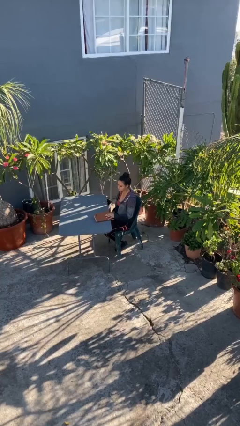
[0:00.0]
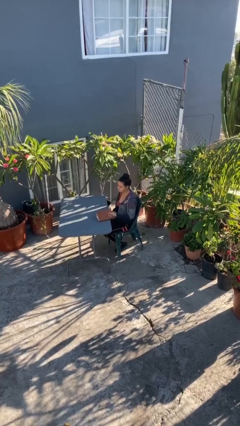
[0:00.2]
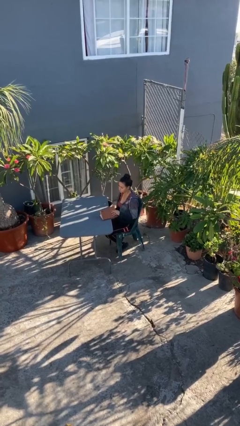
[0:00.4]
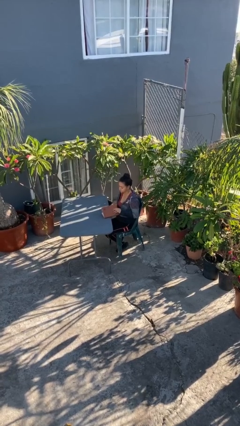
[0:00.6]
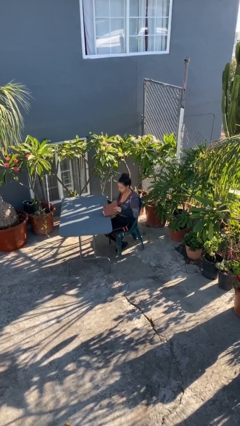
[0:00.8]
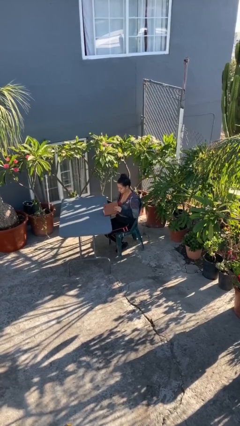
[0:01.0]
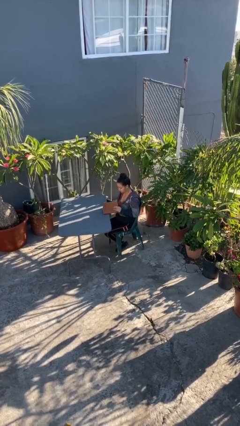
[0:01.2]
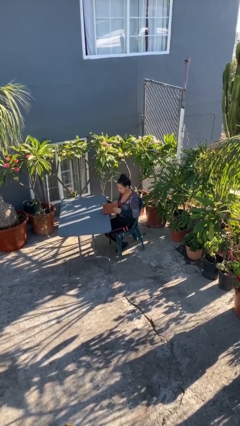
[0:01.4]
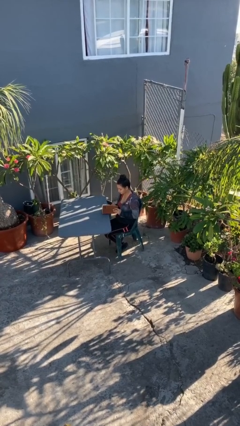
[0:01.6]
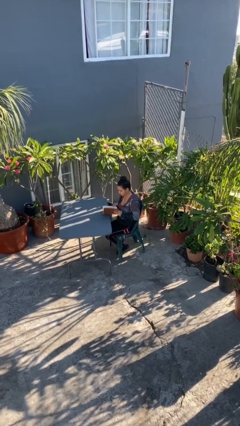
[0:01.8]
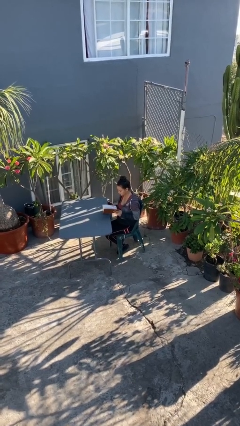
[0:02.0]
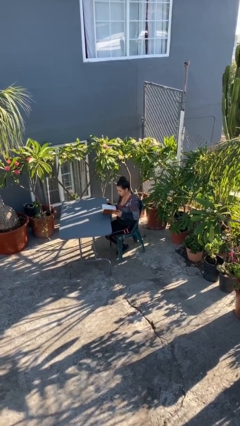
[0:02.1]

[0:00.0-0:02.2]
person picks up object from table

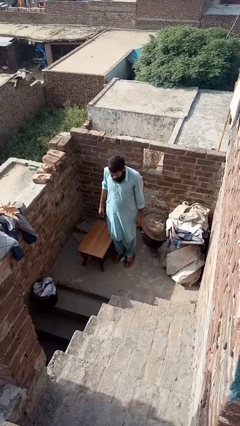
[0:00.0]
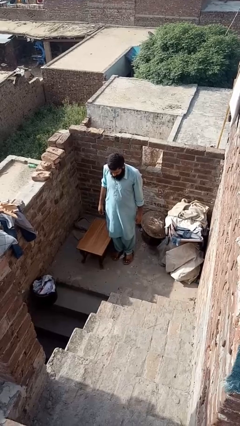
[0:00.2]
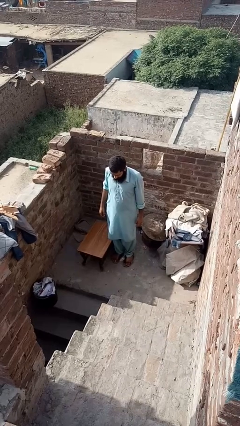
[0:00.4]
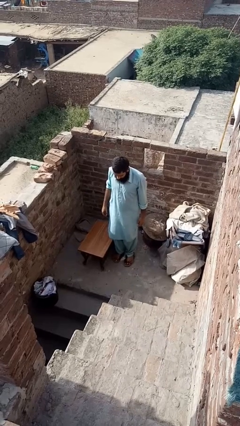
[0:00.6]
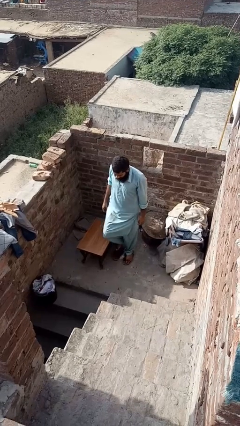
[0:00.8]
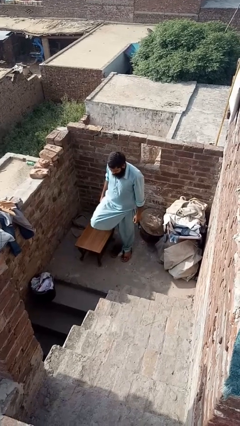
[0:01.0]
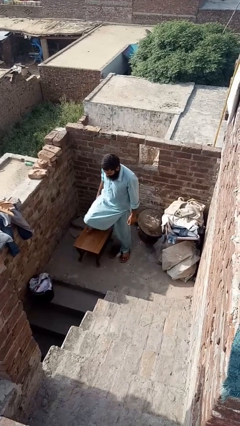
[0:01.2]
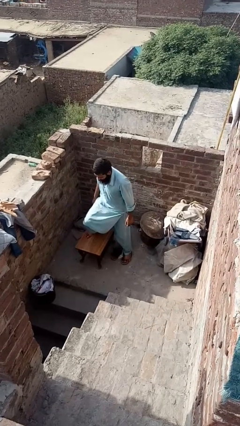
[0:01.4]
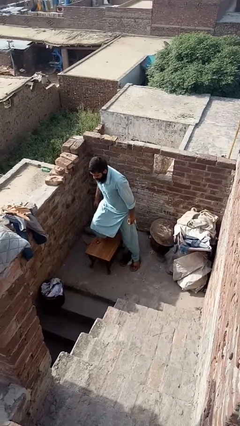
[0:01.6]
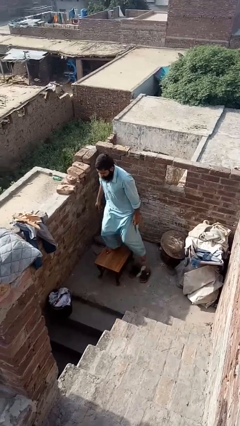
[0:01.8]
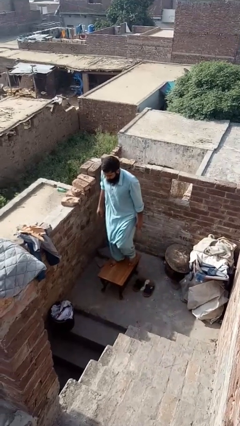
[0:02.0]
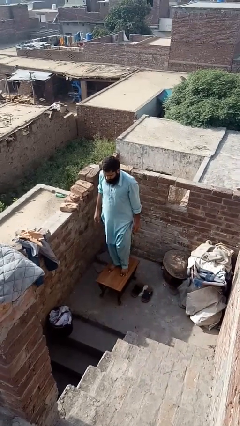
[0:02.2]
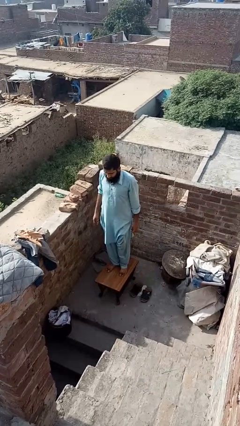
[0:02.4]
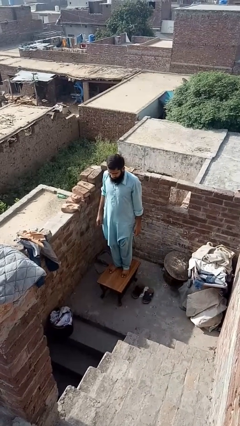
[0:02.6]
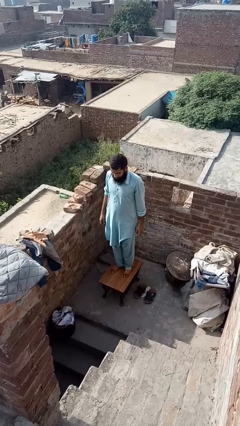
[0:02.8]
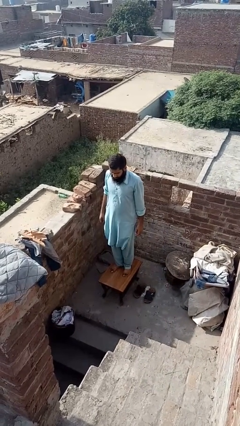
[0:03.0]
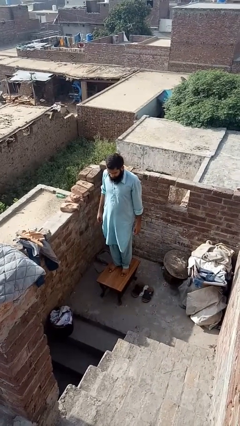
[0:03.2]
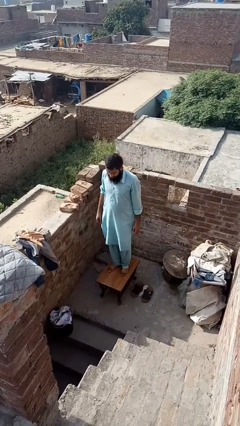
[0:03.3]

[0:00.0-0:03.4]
person climbs on table

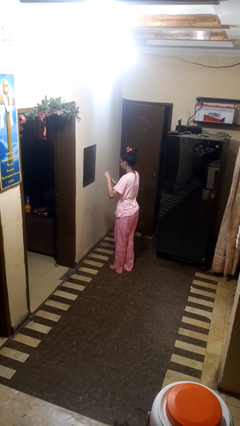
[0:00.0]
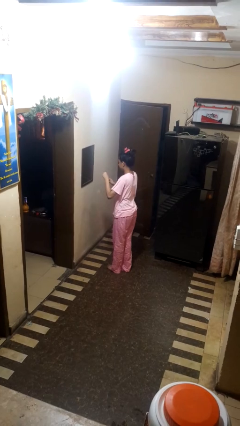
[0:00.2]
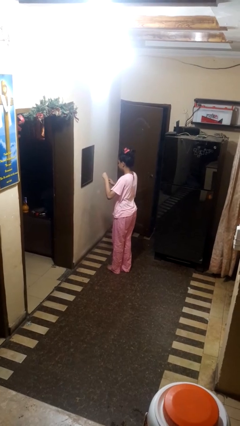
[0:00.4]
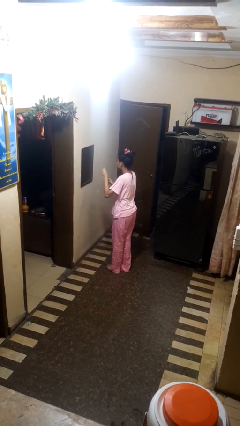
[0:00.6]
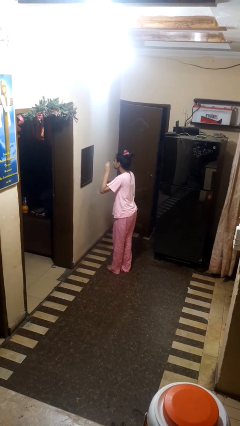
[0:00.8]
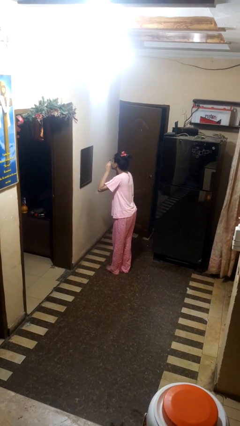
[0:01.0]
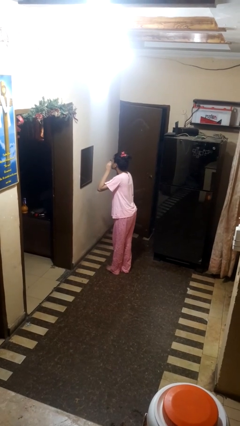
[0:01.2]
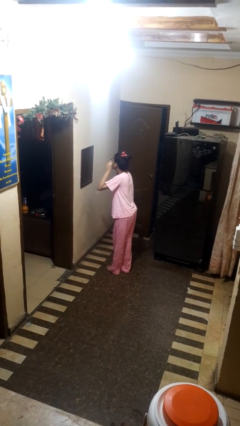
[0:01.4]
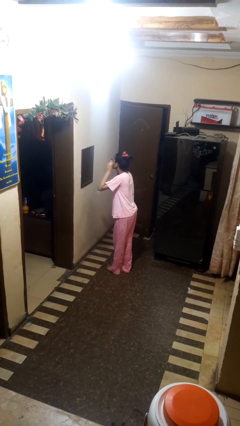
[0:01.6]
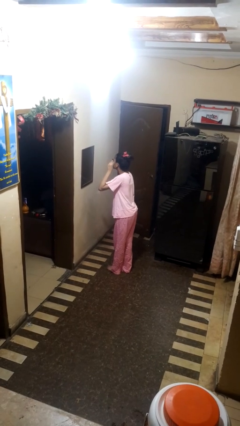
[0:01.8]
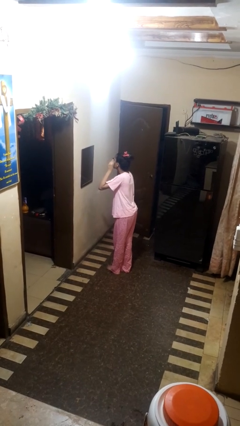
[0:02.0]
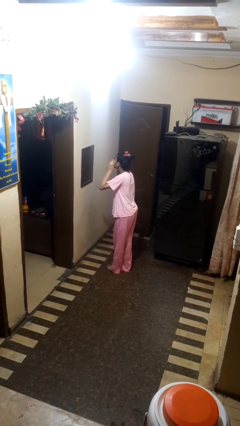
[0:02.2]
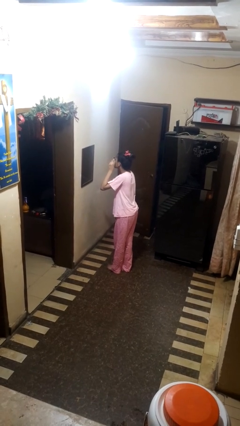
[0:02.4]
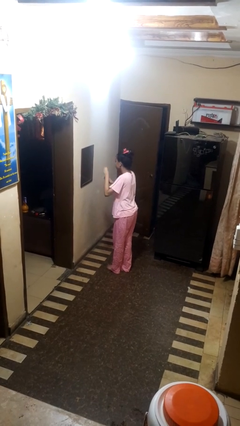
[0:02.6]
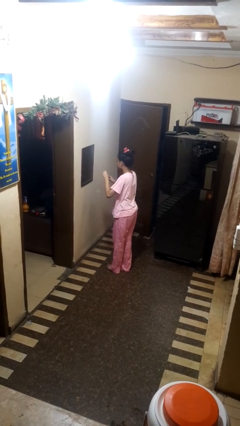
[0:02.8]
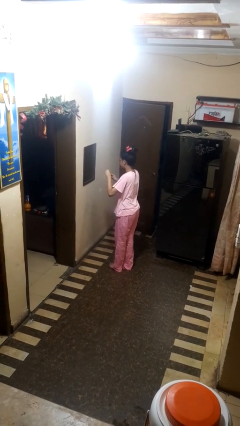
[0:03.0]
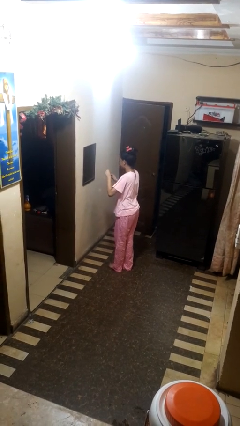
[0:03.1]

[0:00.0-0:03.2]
person applies eye makeup

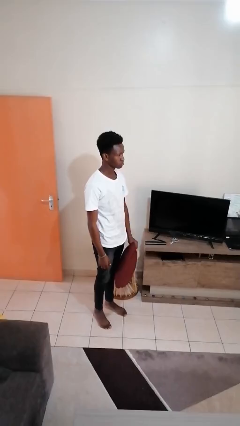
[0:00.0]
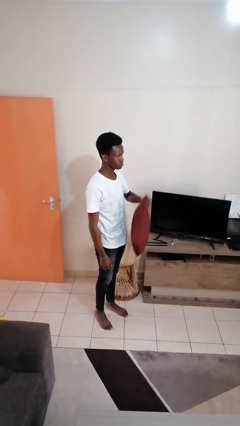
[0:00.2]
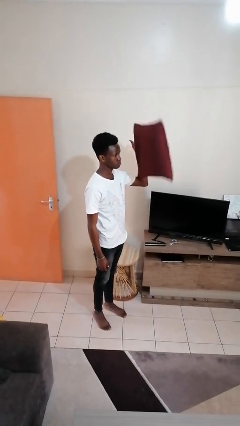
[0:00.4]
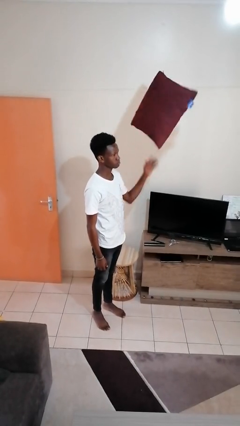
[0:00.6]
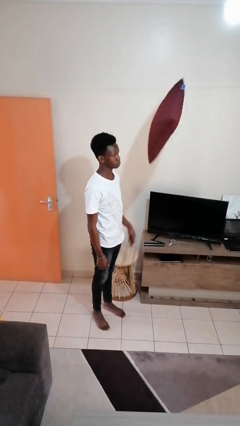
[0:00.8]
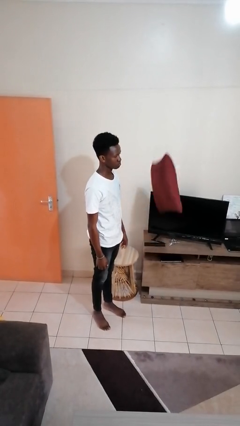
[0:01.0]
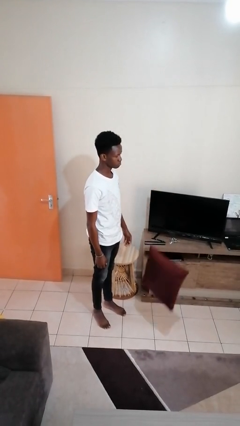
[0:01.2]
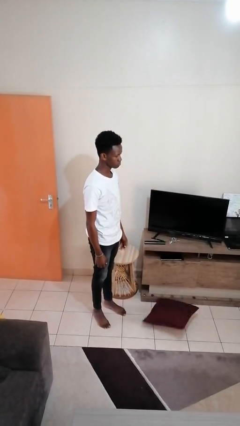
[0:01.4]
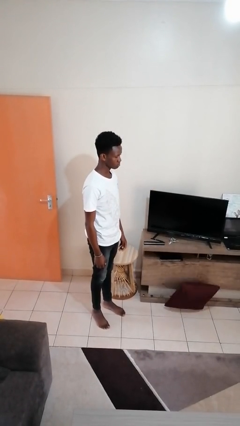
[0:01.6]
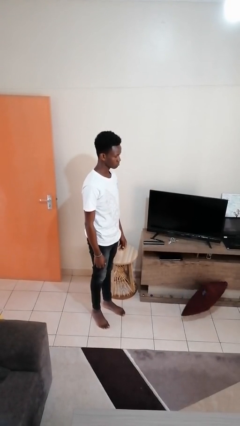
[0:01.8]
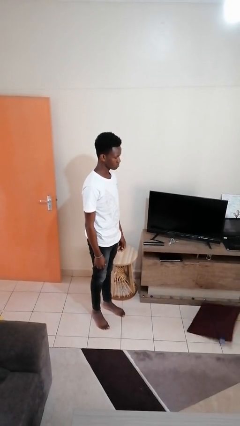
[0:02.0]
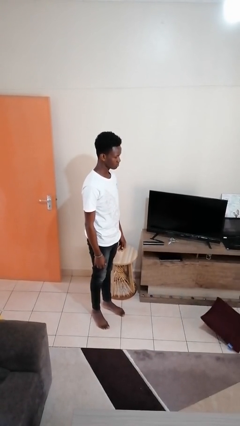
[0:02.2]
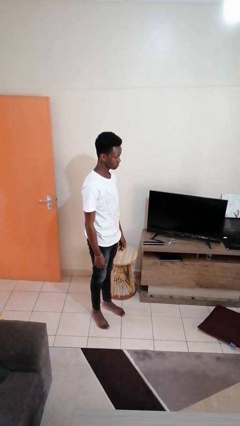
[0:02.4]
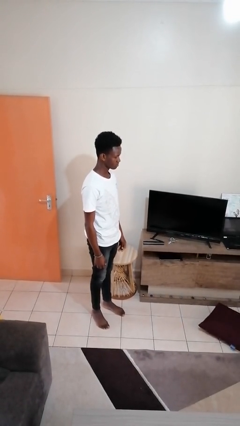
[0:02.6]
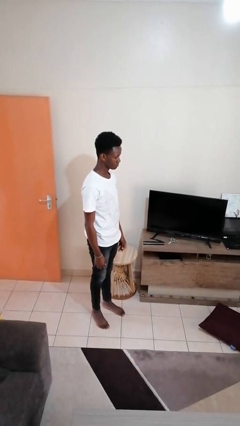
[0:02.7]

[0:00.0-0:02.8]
person throws object into air

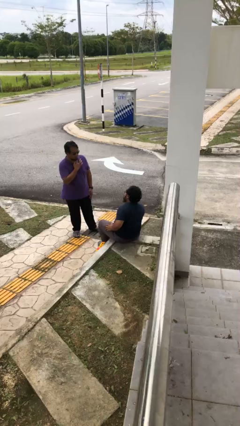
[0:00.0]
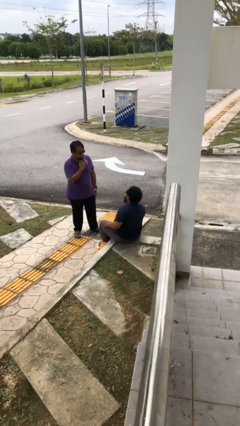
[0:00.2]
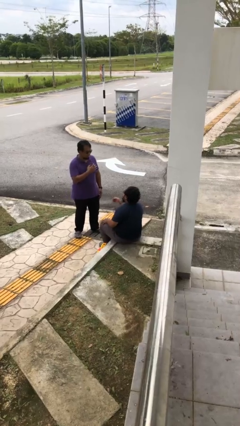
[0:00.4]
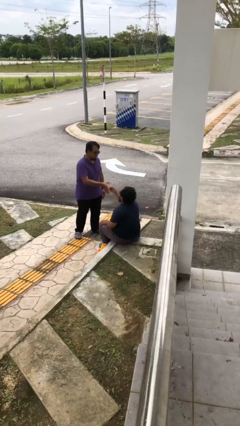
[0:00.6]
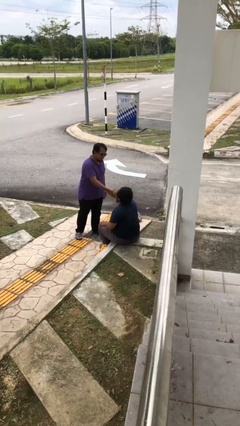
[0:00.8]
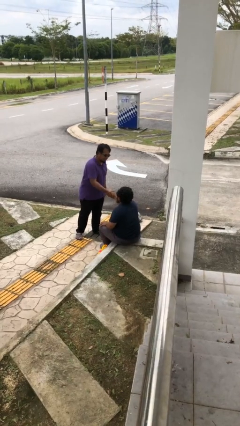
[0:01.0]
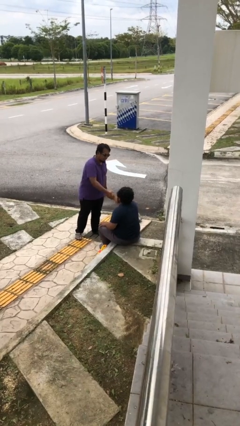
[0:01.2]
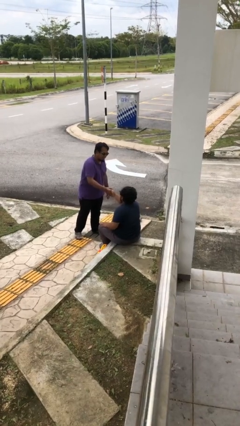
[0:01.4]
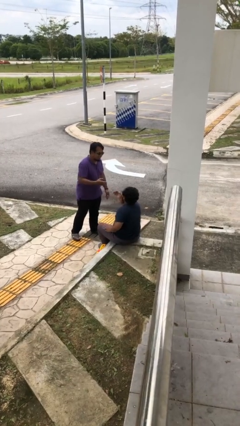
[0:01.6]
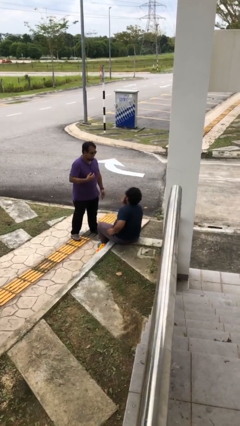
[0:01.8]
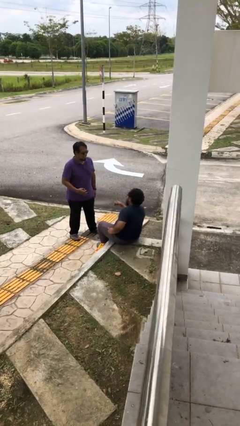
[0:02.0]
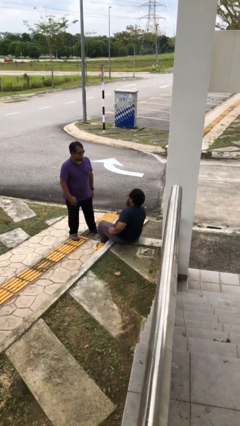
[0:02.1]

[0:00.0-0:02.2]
person shakes hand

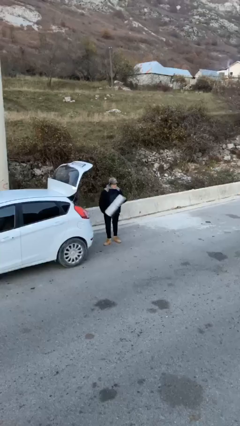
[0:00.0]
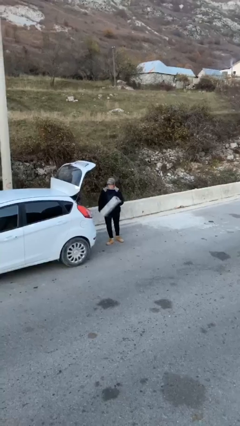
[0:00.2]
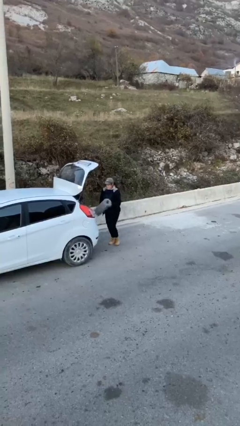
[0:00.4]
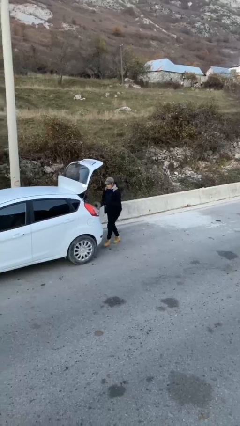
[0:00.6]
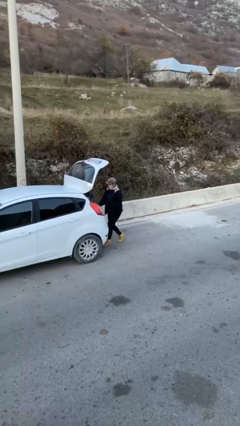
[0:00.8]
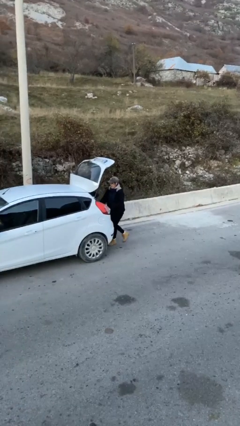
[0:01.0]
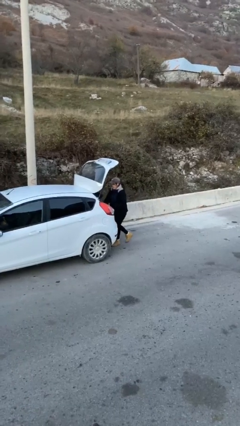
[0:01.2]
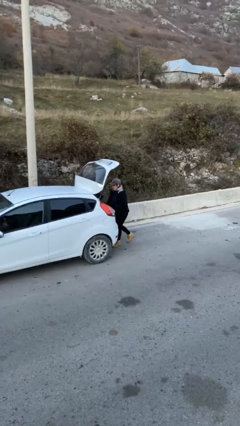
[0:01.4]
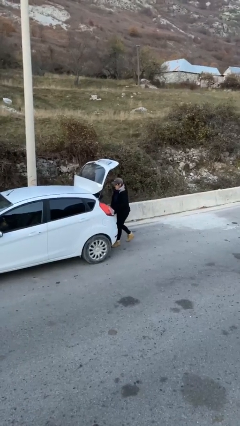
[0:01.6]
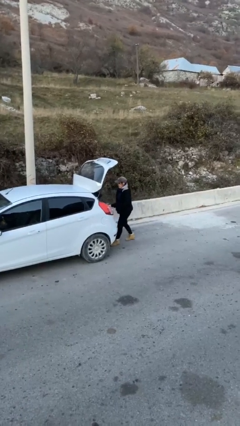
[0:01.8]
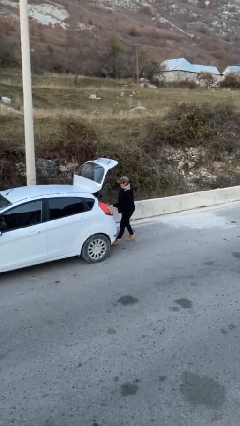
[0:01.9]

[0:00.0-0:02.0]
person loads car

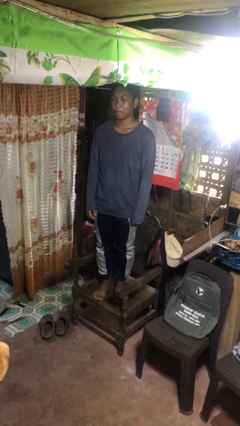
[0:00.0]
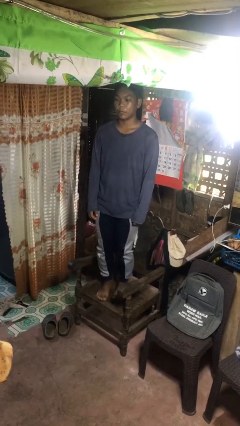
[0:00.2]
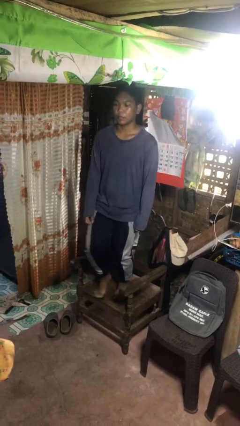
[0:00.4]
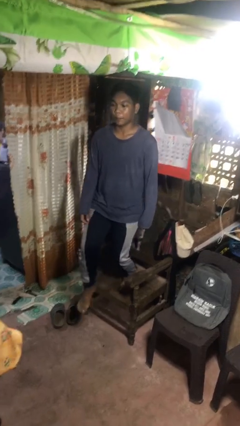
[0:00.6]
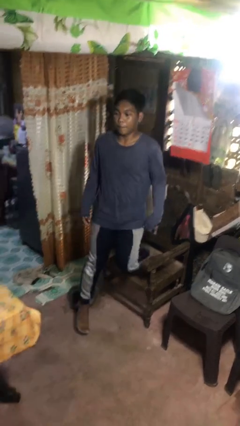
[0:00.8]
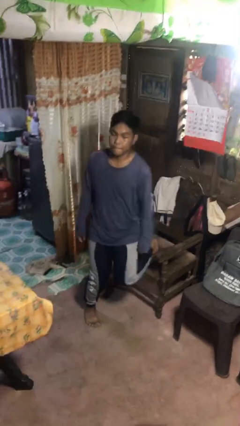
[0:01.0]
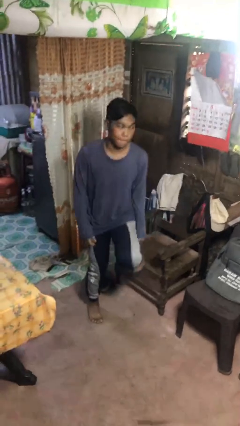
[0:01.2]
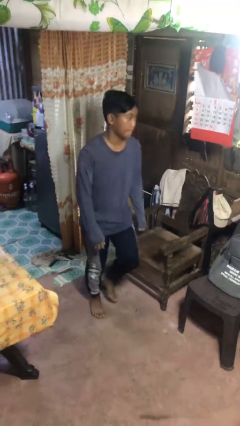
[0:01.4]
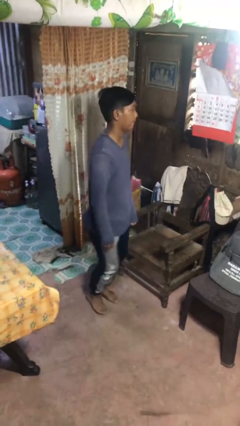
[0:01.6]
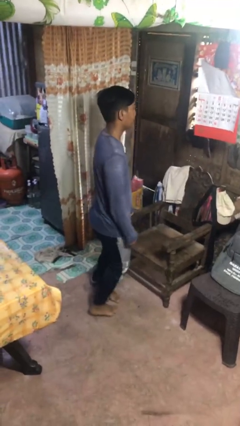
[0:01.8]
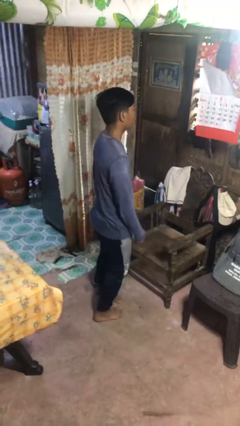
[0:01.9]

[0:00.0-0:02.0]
person climbs off chair
